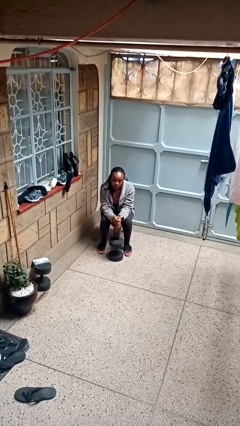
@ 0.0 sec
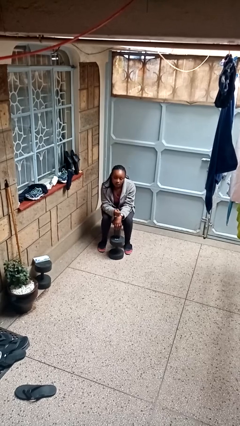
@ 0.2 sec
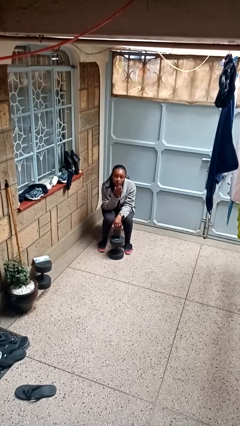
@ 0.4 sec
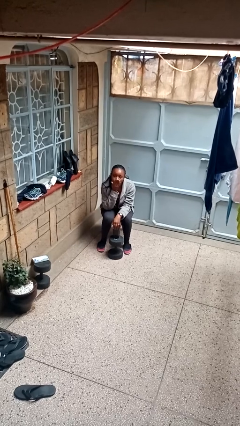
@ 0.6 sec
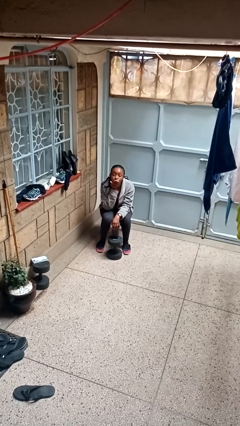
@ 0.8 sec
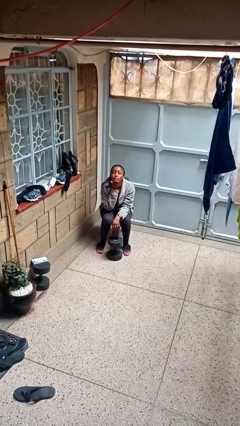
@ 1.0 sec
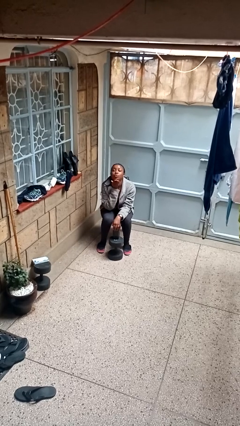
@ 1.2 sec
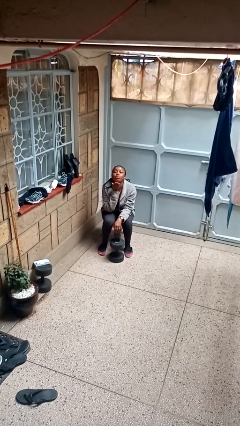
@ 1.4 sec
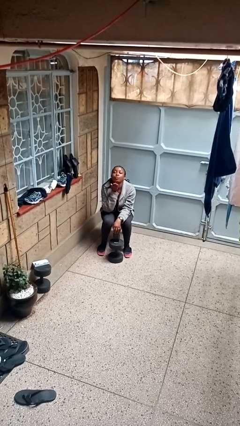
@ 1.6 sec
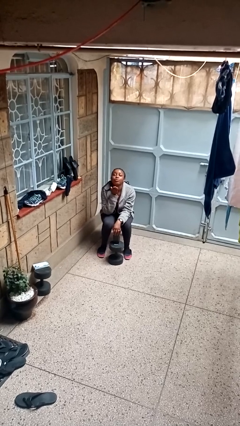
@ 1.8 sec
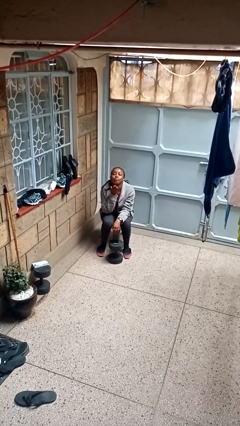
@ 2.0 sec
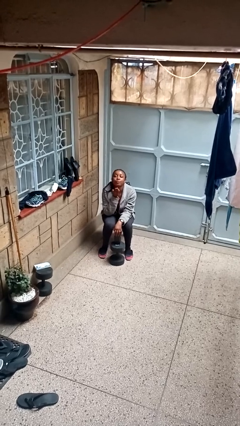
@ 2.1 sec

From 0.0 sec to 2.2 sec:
person gestures blow kiss

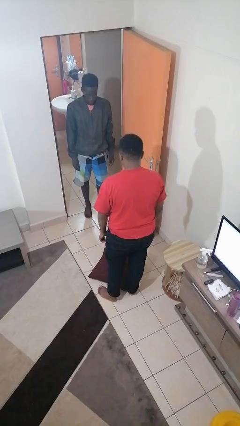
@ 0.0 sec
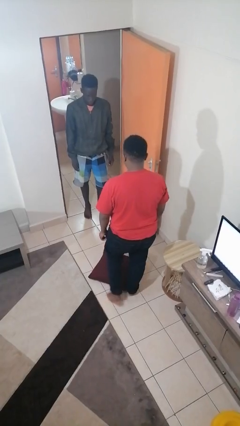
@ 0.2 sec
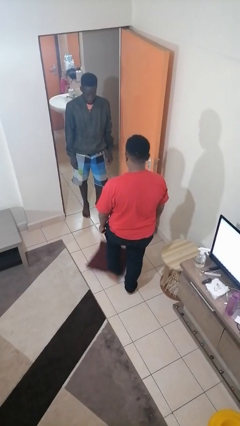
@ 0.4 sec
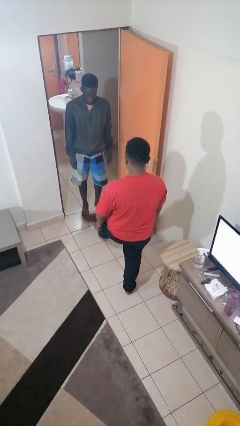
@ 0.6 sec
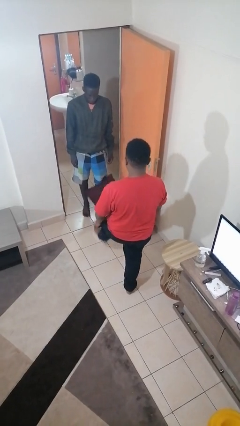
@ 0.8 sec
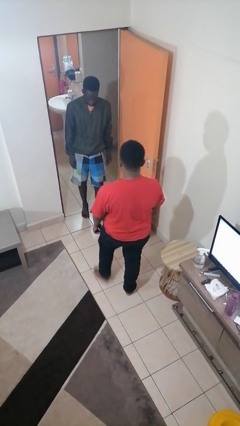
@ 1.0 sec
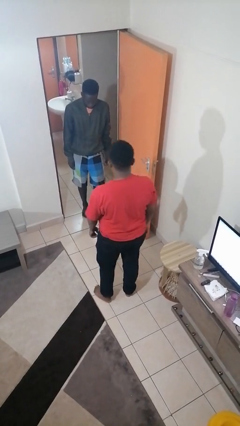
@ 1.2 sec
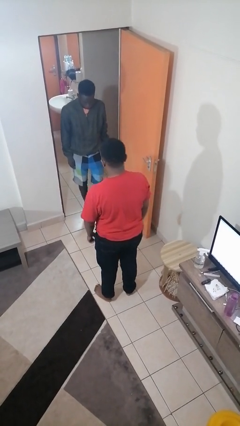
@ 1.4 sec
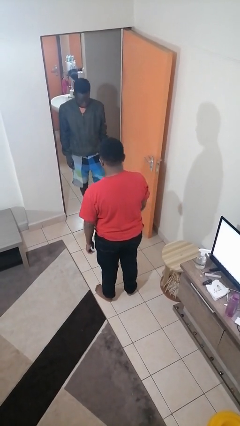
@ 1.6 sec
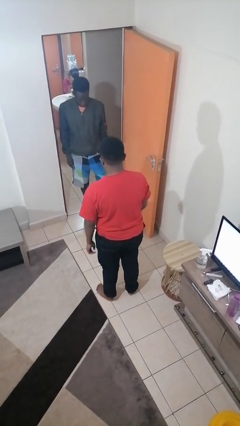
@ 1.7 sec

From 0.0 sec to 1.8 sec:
person kicks object to person

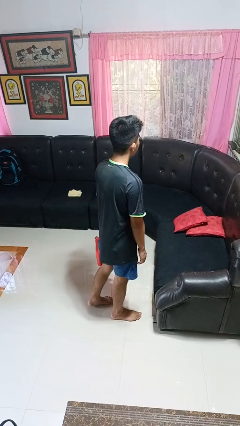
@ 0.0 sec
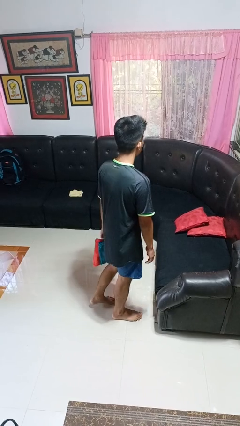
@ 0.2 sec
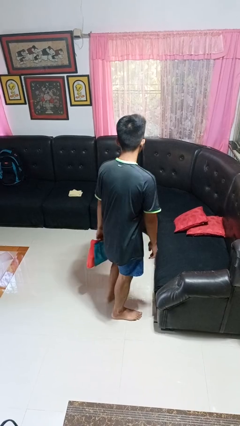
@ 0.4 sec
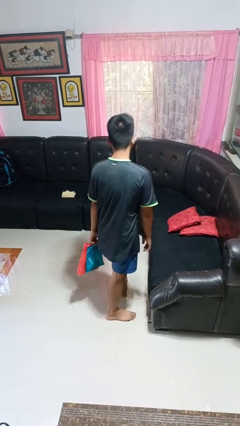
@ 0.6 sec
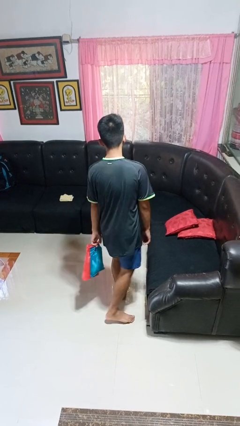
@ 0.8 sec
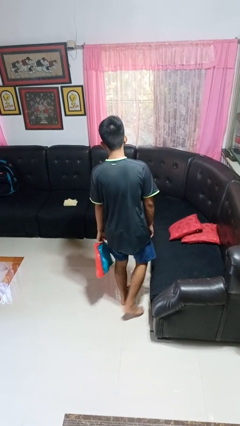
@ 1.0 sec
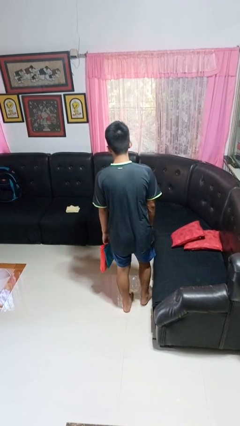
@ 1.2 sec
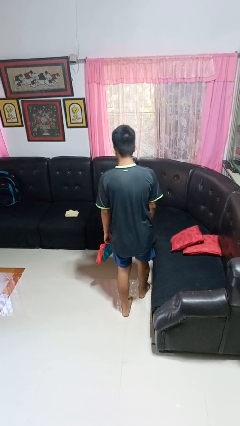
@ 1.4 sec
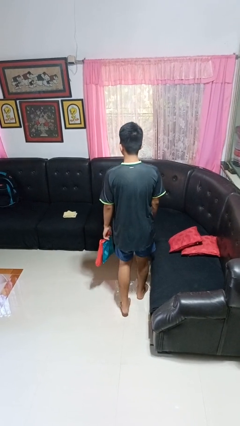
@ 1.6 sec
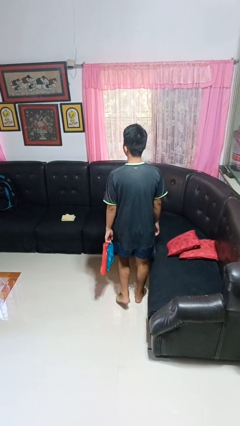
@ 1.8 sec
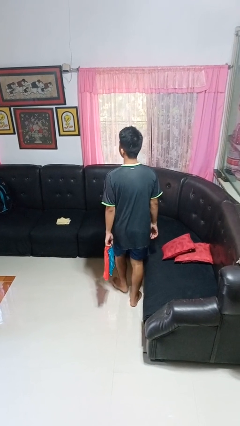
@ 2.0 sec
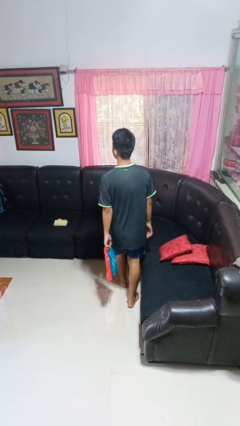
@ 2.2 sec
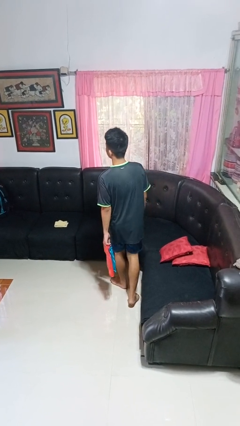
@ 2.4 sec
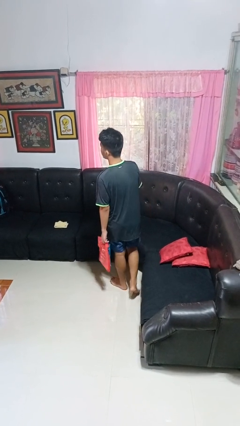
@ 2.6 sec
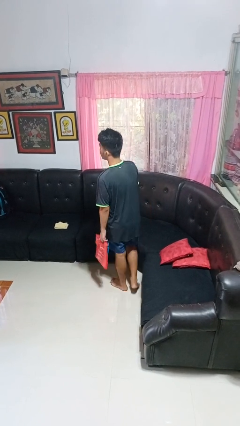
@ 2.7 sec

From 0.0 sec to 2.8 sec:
person carries groceries

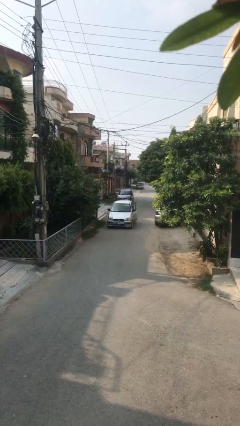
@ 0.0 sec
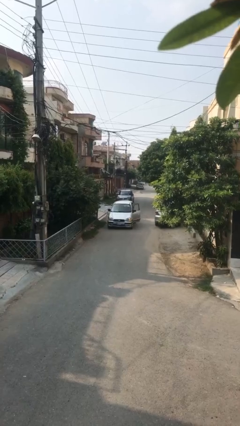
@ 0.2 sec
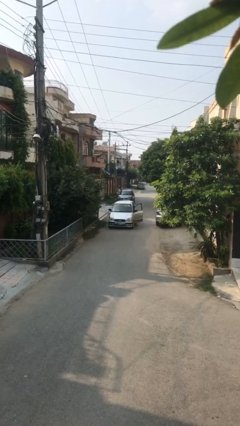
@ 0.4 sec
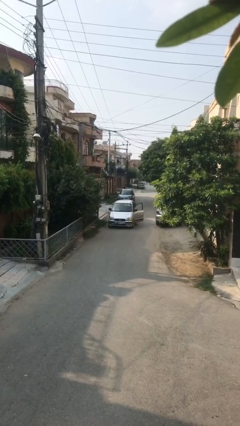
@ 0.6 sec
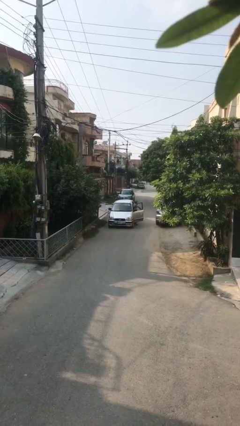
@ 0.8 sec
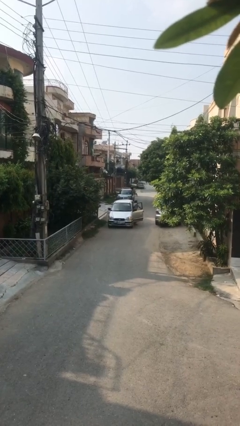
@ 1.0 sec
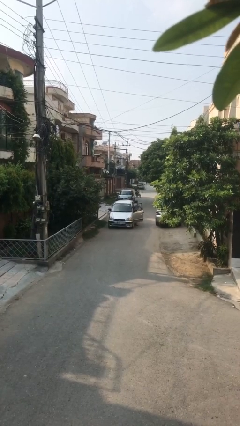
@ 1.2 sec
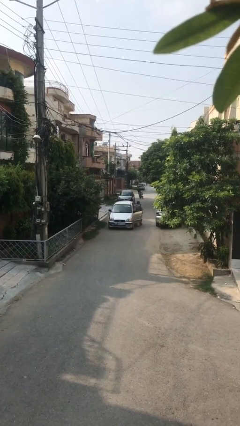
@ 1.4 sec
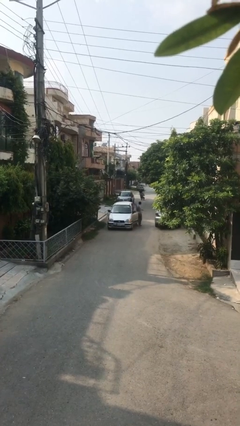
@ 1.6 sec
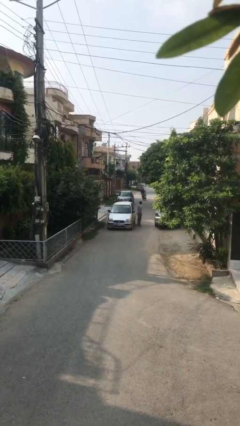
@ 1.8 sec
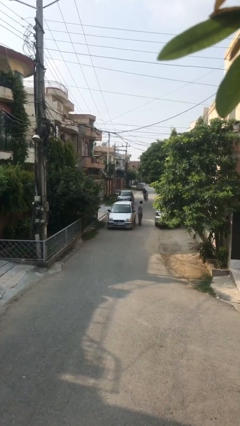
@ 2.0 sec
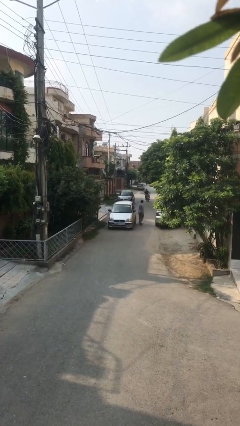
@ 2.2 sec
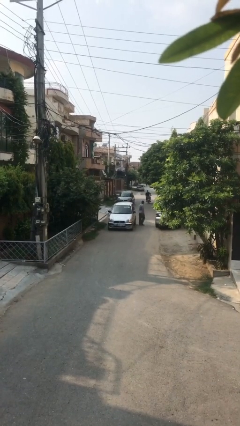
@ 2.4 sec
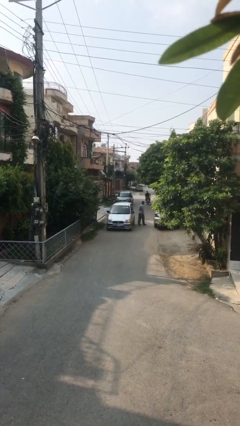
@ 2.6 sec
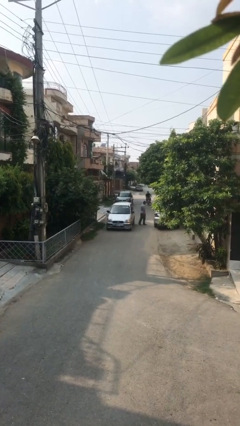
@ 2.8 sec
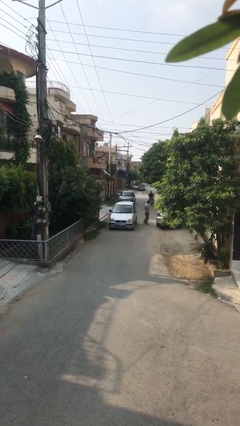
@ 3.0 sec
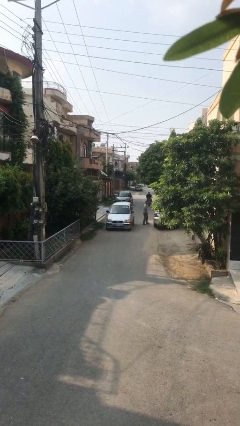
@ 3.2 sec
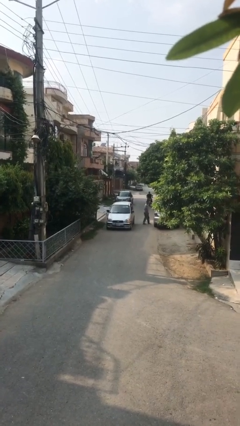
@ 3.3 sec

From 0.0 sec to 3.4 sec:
car drops off person

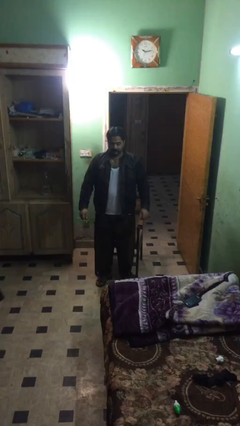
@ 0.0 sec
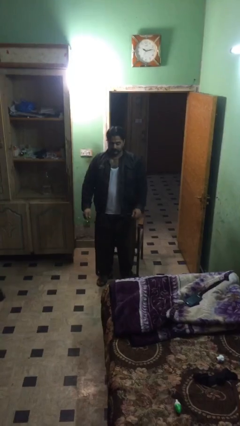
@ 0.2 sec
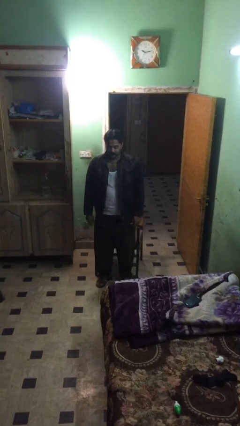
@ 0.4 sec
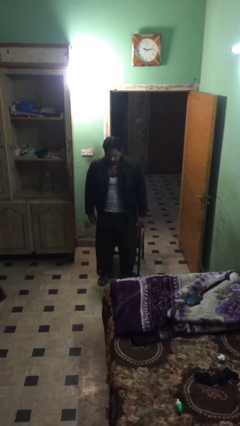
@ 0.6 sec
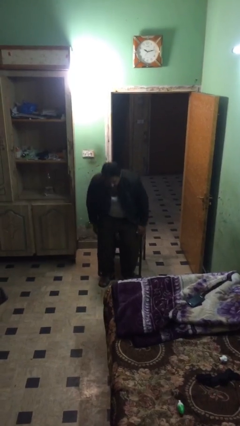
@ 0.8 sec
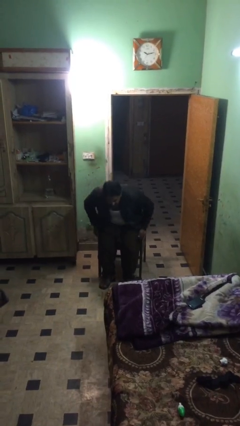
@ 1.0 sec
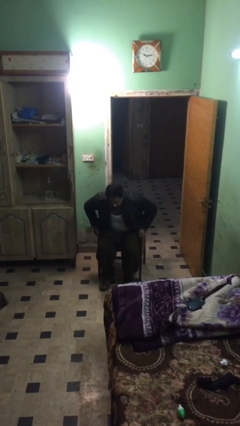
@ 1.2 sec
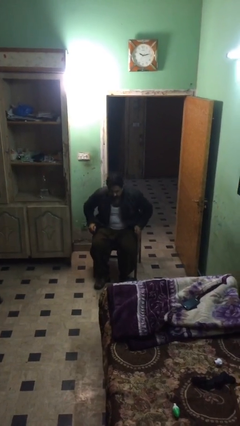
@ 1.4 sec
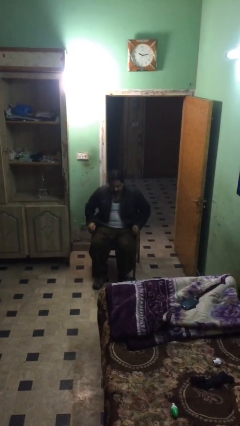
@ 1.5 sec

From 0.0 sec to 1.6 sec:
person sits down

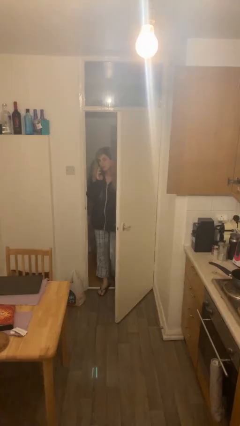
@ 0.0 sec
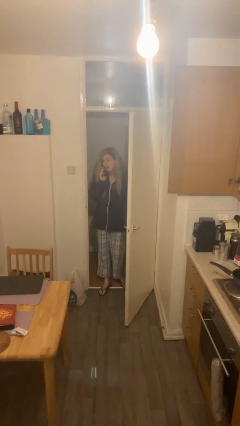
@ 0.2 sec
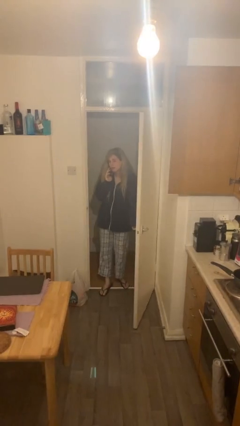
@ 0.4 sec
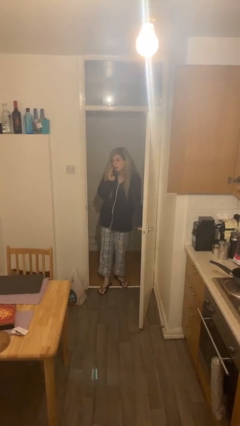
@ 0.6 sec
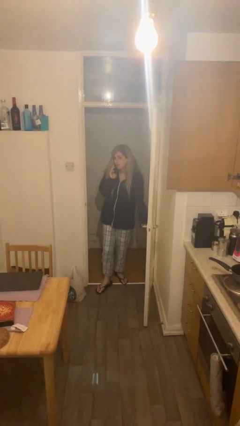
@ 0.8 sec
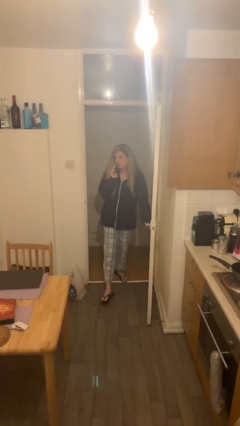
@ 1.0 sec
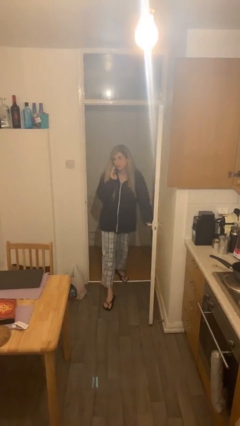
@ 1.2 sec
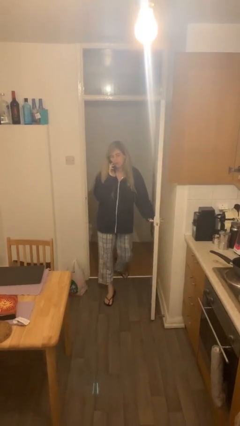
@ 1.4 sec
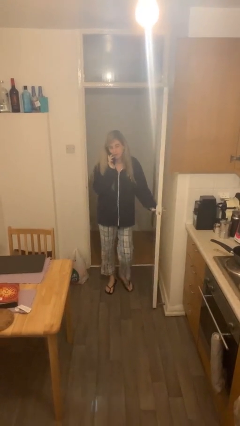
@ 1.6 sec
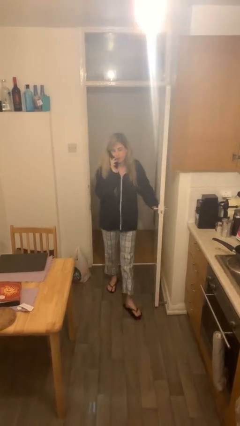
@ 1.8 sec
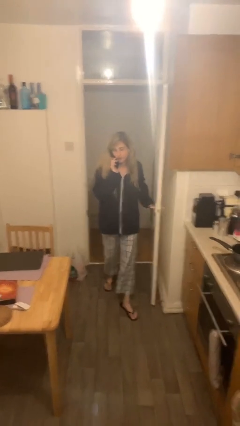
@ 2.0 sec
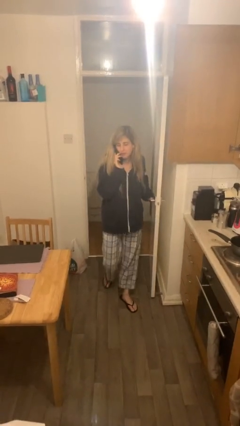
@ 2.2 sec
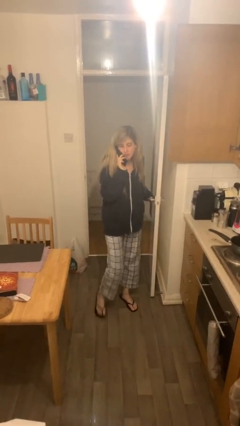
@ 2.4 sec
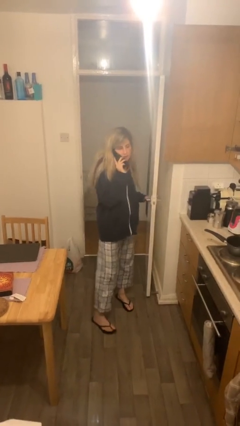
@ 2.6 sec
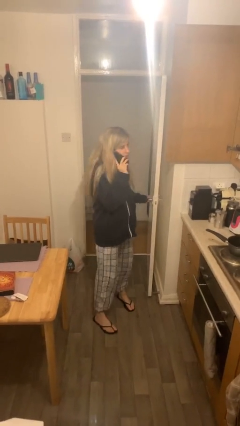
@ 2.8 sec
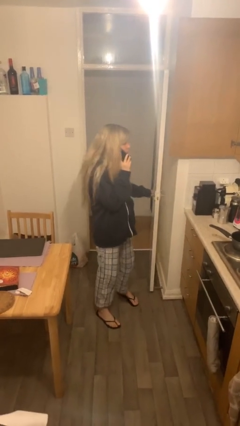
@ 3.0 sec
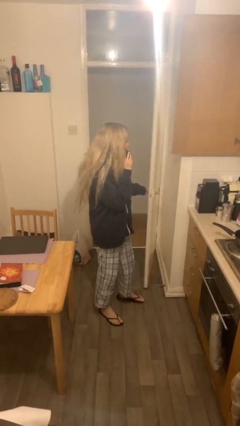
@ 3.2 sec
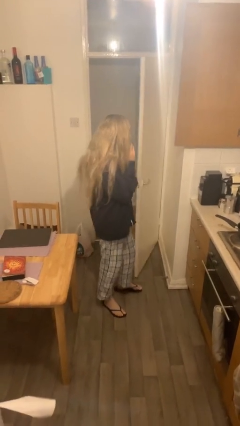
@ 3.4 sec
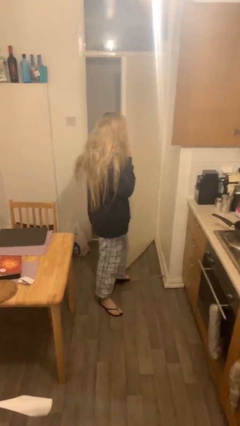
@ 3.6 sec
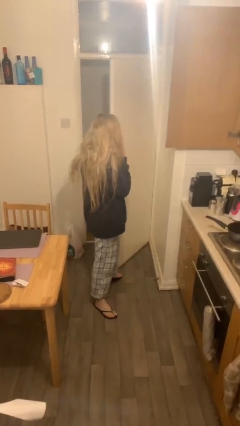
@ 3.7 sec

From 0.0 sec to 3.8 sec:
person enters scene through structure

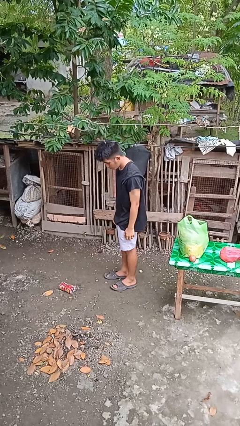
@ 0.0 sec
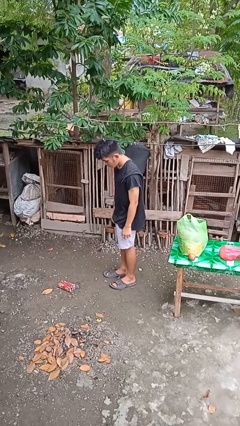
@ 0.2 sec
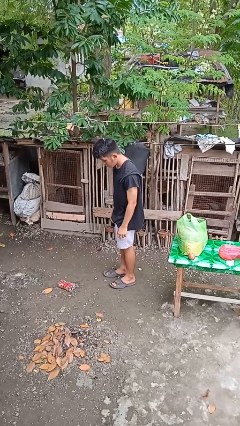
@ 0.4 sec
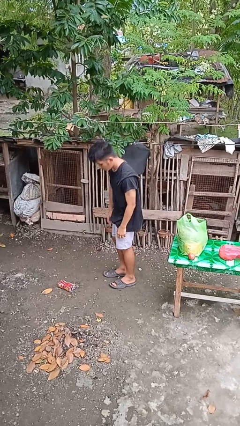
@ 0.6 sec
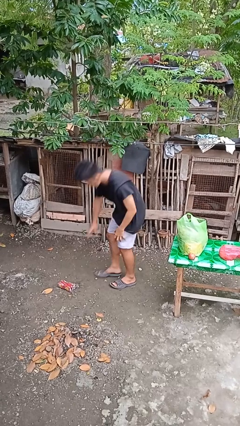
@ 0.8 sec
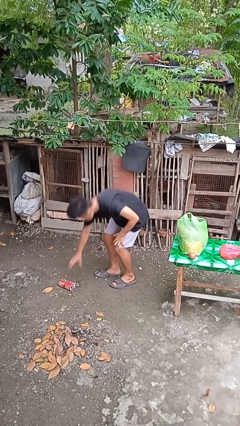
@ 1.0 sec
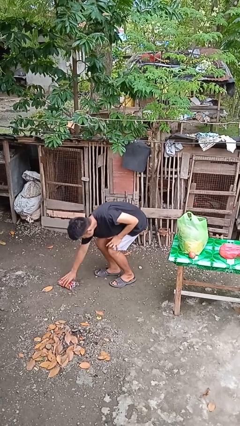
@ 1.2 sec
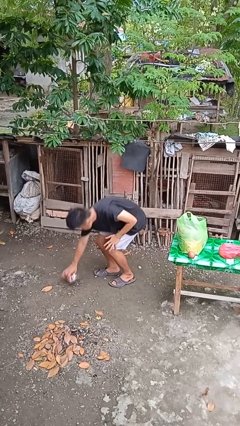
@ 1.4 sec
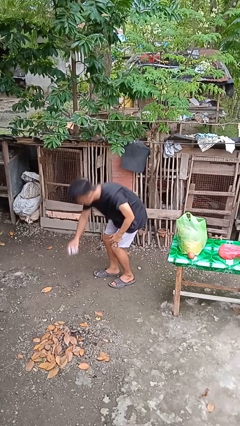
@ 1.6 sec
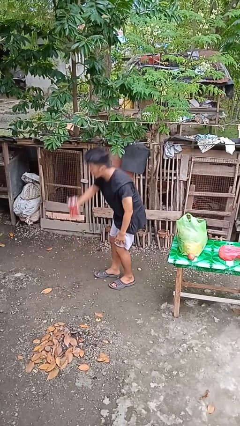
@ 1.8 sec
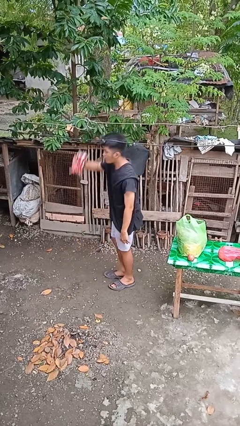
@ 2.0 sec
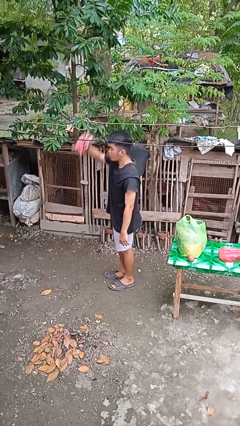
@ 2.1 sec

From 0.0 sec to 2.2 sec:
person picks up object from floor
